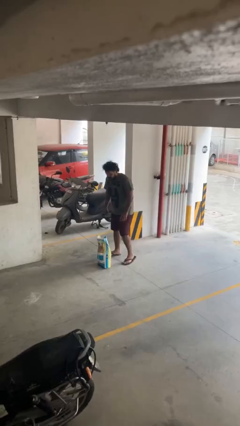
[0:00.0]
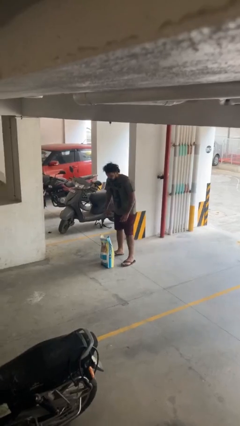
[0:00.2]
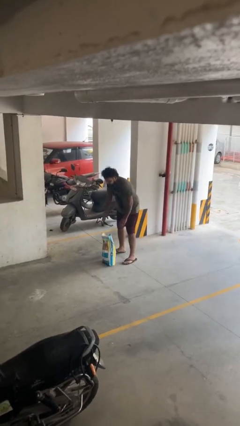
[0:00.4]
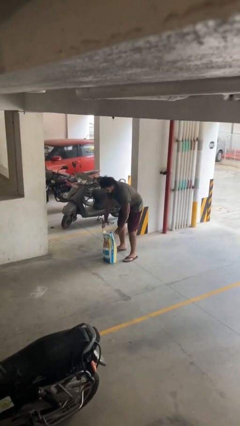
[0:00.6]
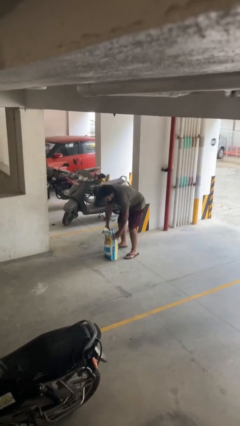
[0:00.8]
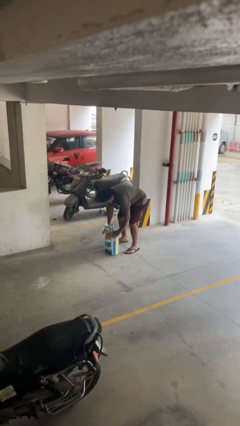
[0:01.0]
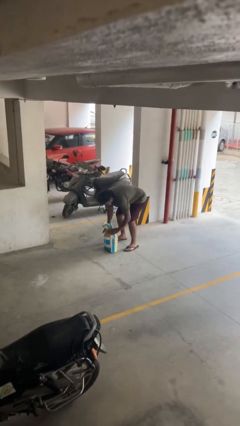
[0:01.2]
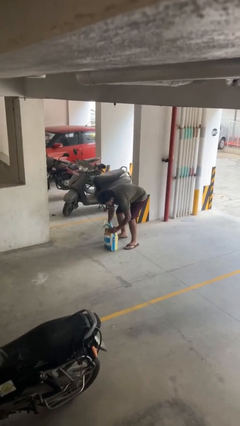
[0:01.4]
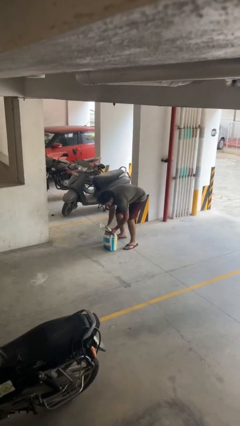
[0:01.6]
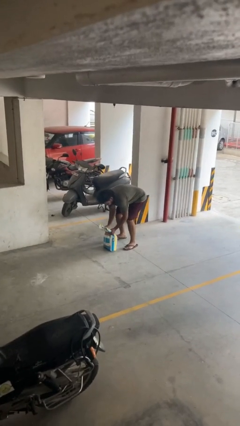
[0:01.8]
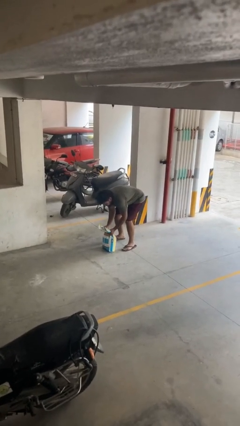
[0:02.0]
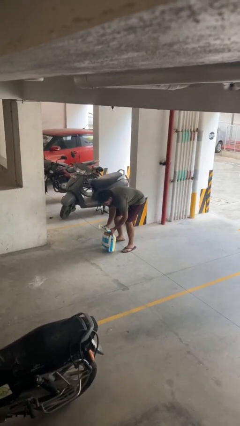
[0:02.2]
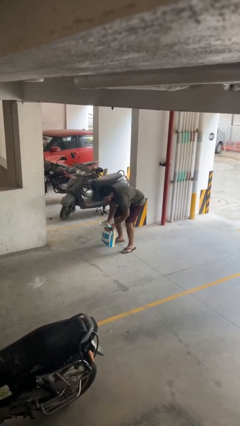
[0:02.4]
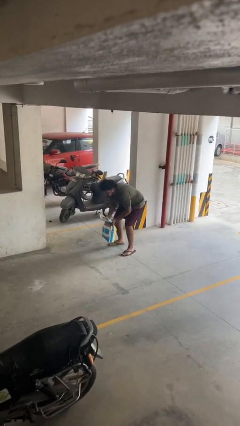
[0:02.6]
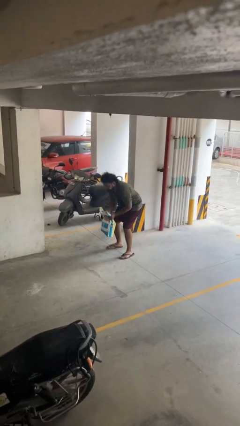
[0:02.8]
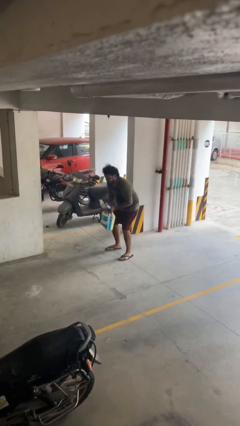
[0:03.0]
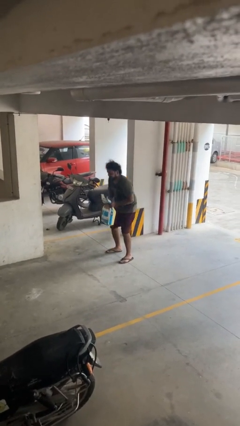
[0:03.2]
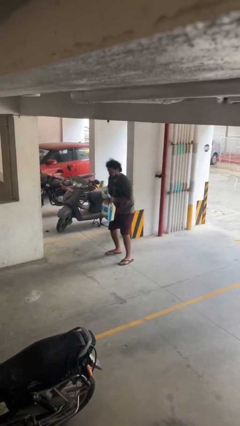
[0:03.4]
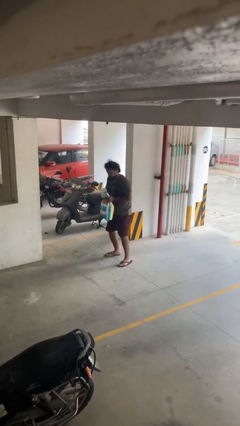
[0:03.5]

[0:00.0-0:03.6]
person picks up object from floor

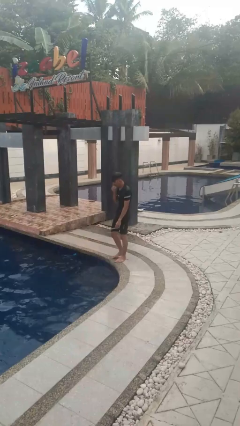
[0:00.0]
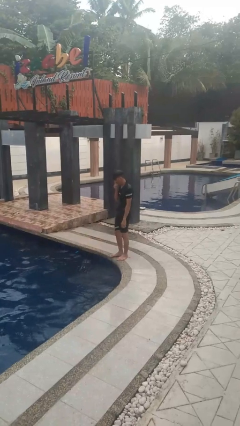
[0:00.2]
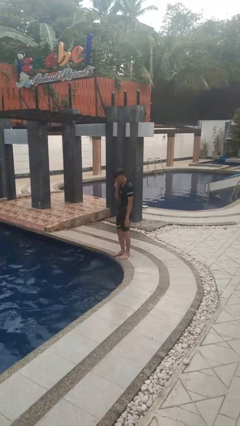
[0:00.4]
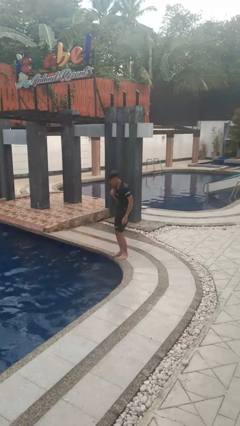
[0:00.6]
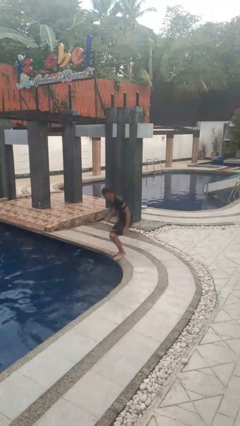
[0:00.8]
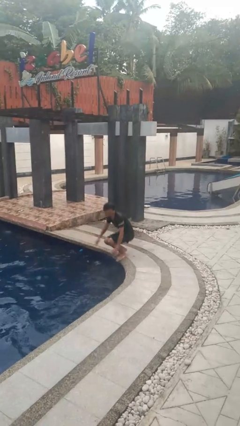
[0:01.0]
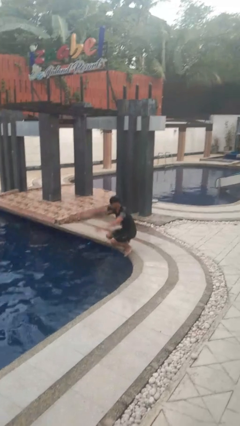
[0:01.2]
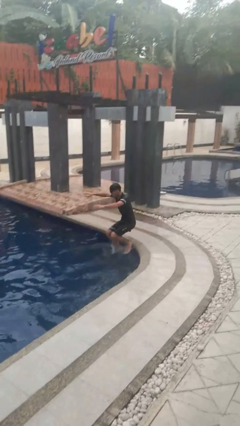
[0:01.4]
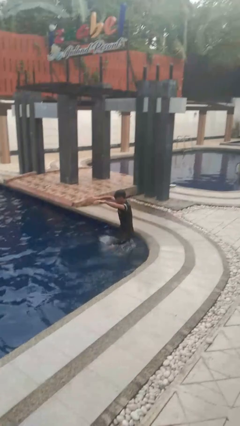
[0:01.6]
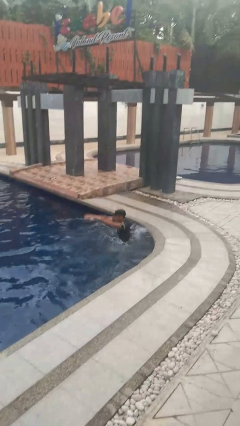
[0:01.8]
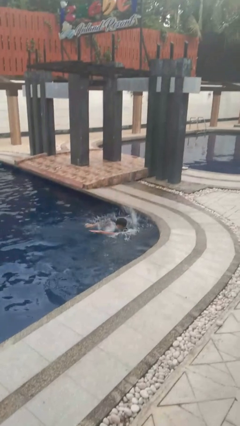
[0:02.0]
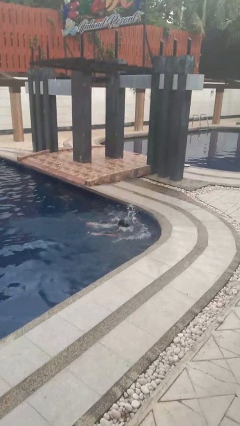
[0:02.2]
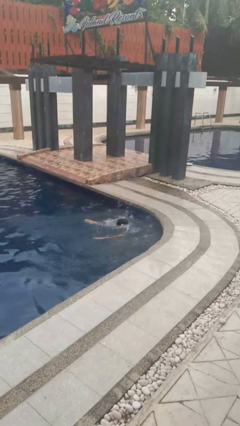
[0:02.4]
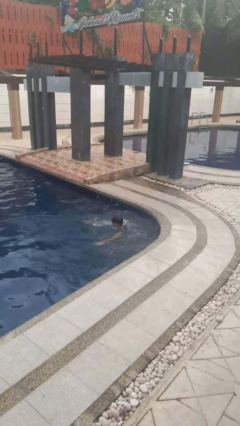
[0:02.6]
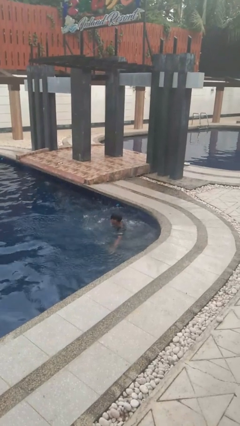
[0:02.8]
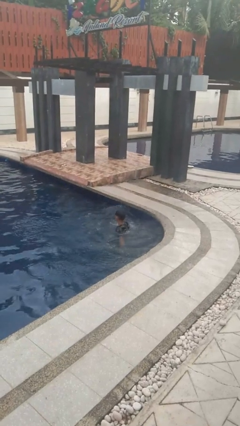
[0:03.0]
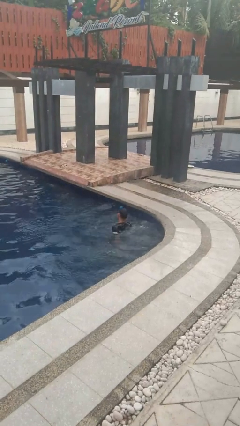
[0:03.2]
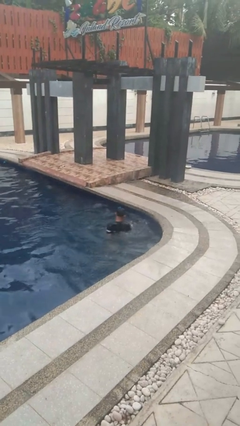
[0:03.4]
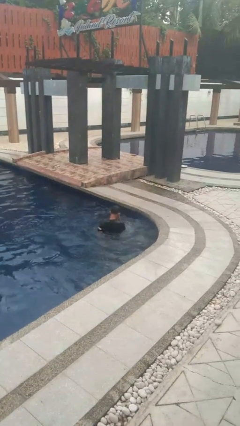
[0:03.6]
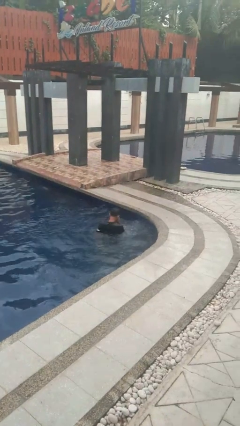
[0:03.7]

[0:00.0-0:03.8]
person jumps into pool

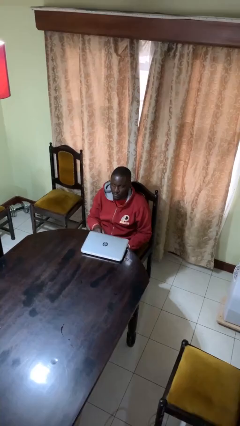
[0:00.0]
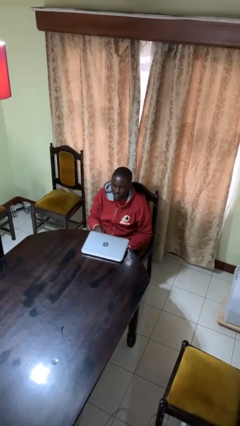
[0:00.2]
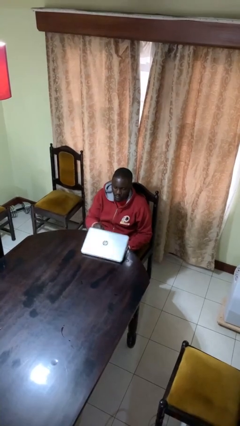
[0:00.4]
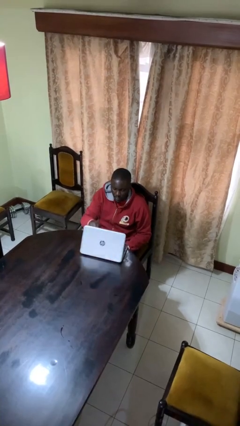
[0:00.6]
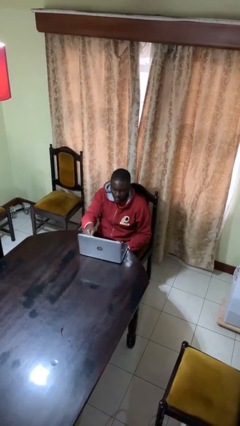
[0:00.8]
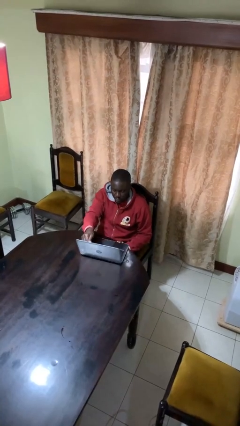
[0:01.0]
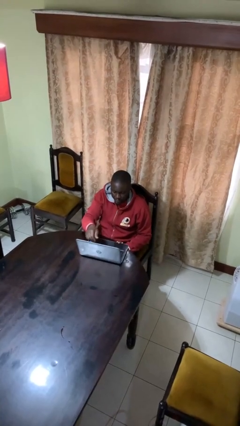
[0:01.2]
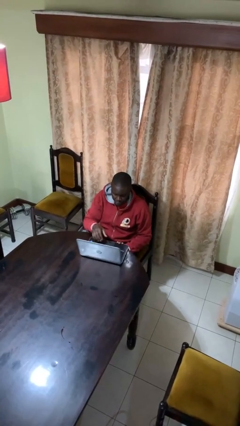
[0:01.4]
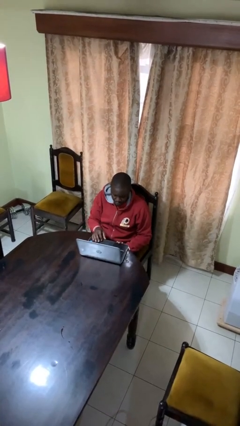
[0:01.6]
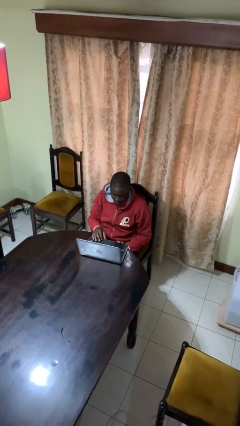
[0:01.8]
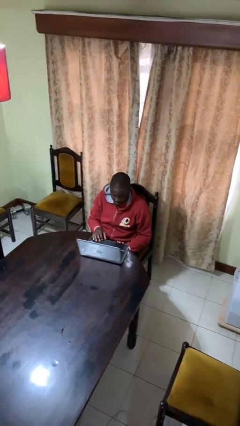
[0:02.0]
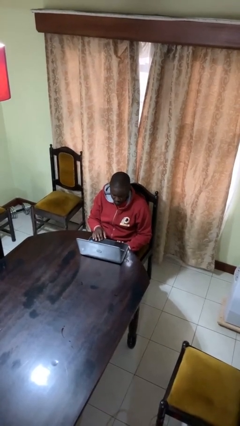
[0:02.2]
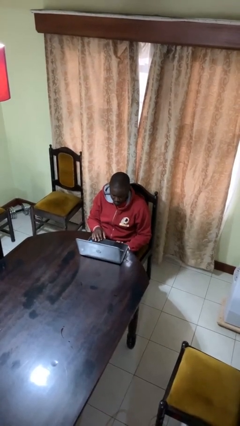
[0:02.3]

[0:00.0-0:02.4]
person opens laptop

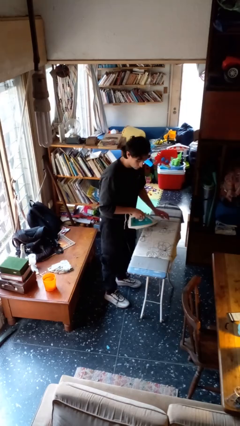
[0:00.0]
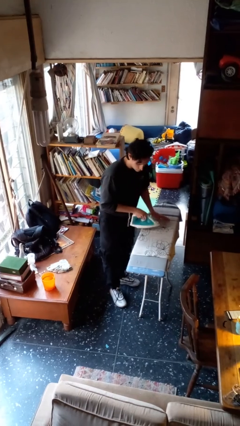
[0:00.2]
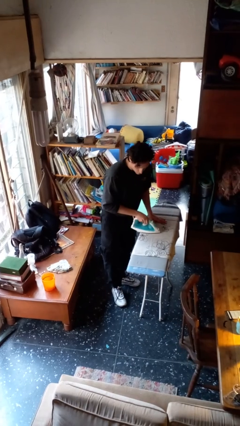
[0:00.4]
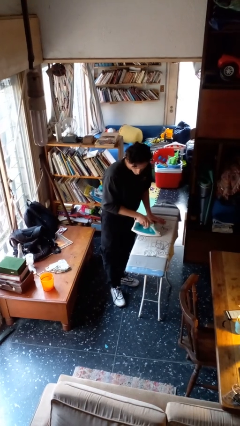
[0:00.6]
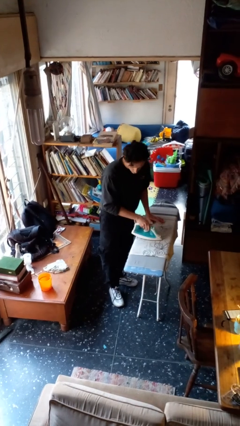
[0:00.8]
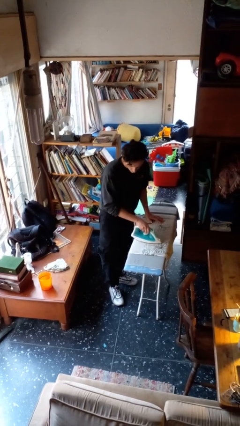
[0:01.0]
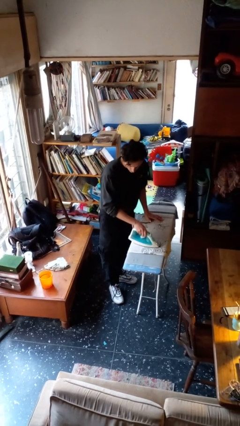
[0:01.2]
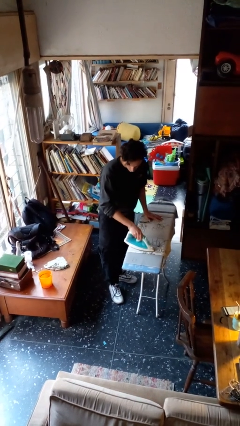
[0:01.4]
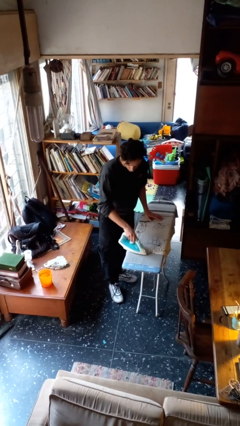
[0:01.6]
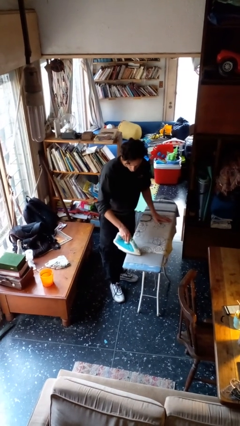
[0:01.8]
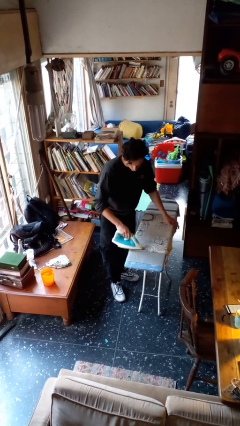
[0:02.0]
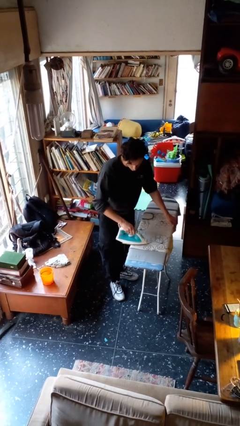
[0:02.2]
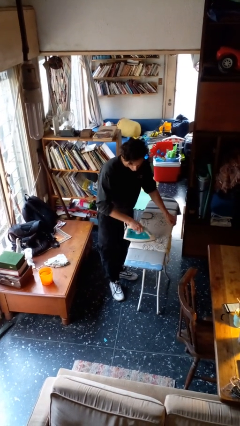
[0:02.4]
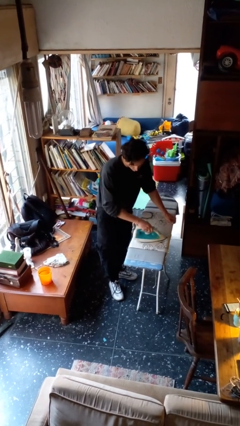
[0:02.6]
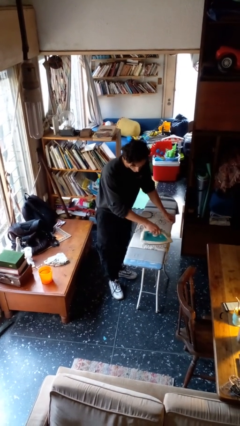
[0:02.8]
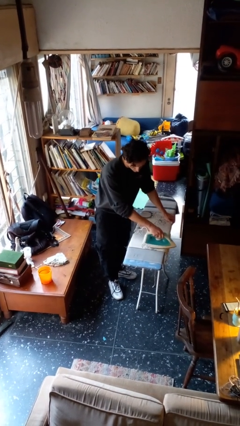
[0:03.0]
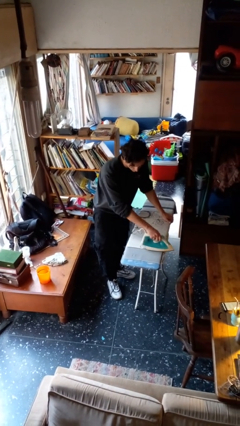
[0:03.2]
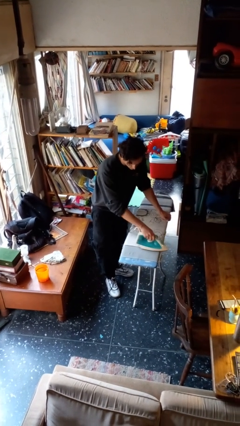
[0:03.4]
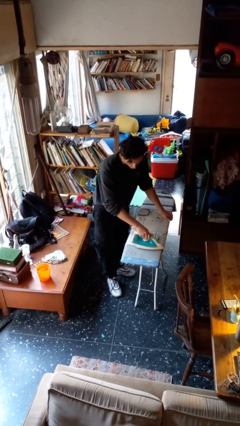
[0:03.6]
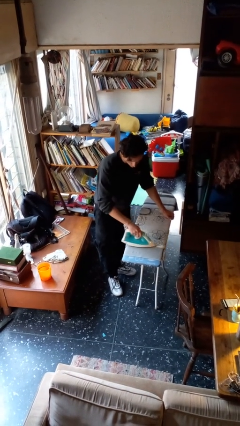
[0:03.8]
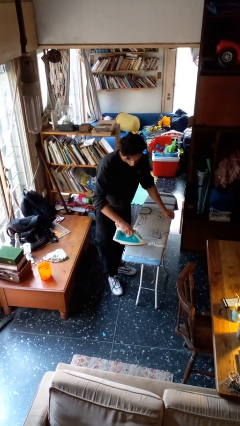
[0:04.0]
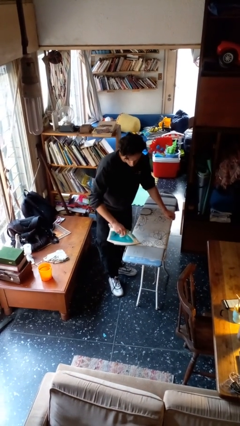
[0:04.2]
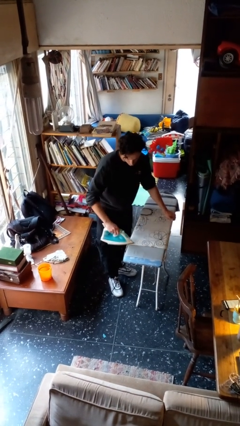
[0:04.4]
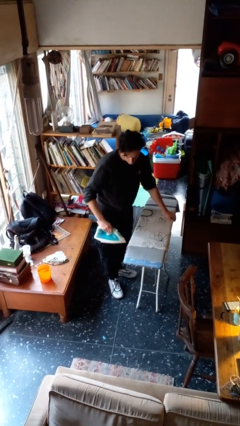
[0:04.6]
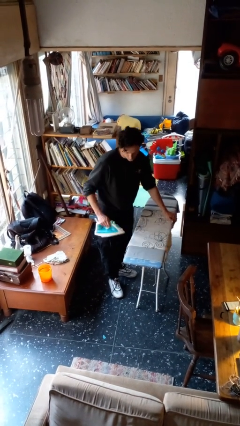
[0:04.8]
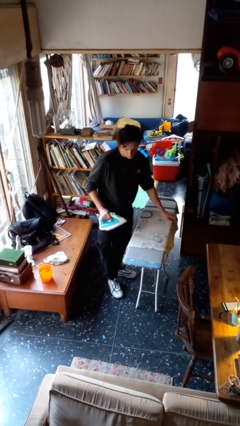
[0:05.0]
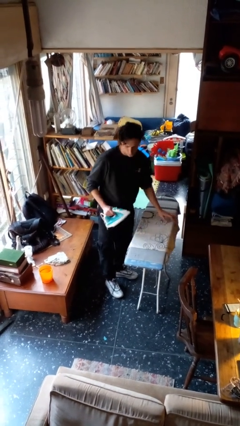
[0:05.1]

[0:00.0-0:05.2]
person irons clothes

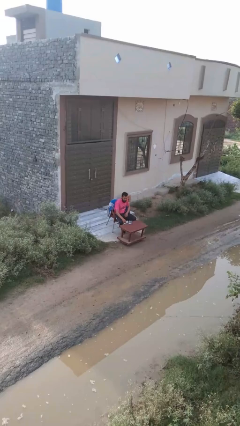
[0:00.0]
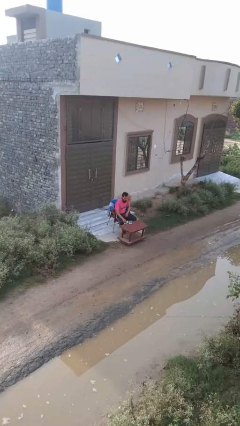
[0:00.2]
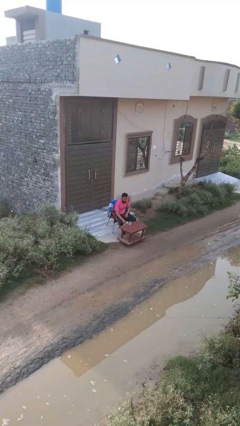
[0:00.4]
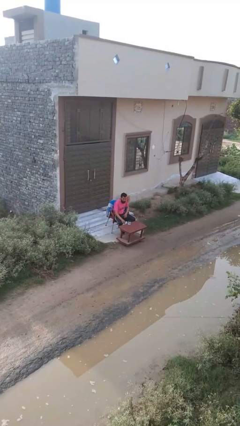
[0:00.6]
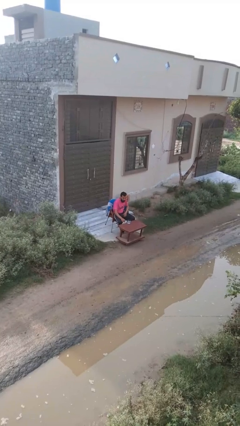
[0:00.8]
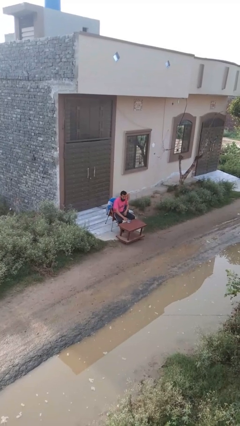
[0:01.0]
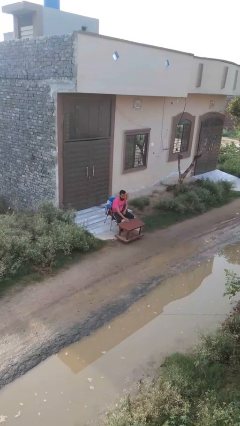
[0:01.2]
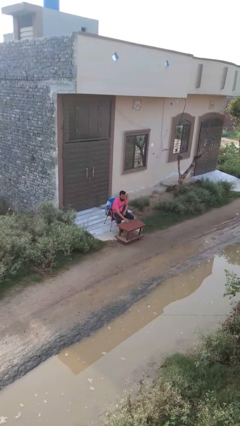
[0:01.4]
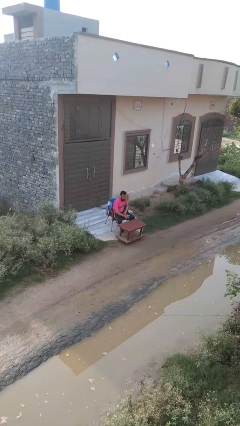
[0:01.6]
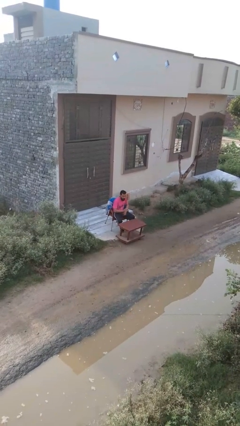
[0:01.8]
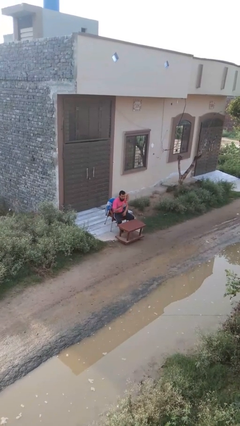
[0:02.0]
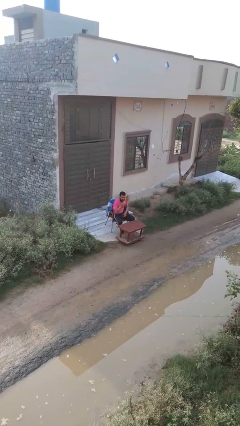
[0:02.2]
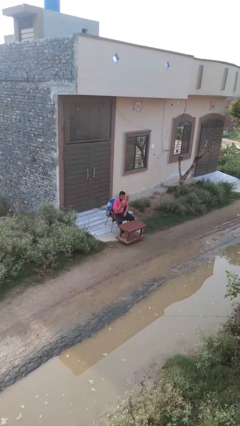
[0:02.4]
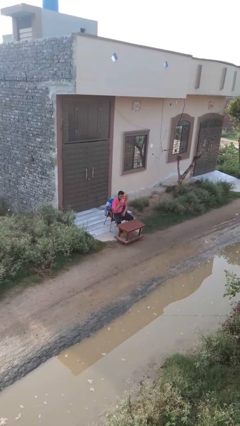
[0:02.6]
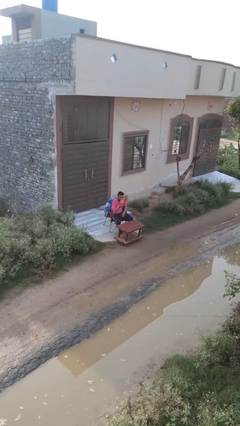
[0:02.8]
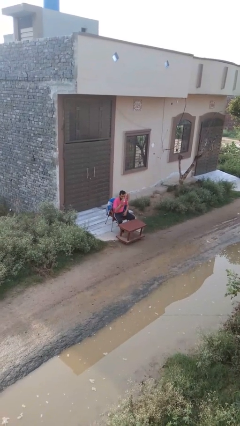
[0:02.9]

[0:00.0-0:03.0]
person picks up object from table
